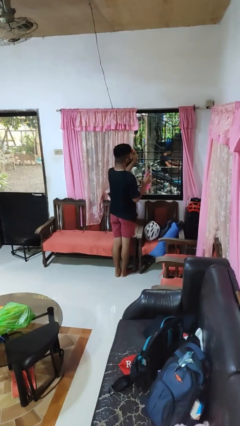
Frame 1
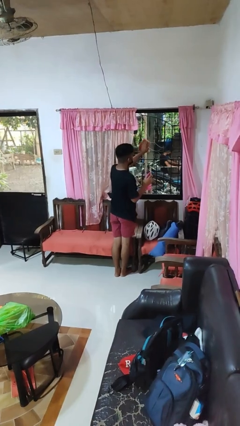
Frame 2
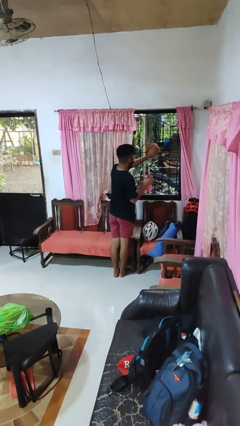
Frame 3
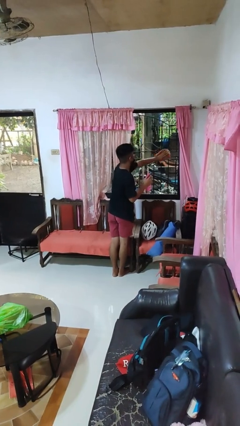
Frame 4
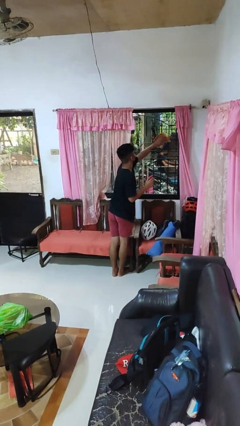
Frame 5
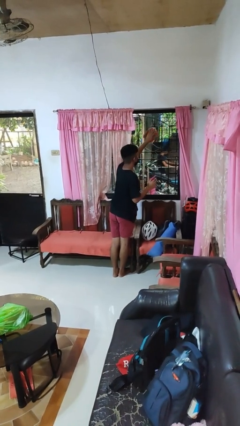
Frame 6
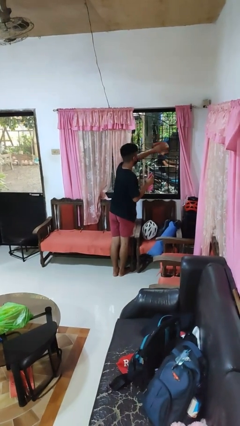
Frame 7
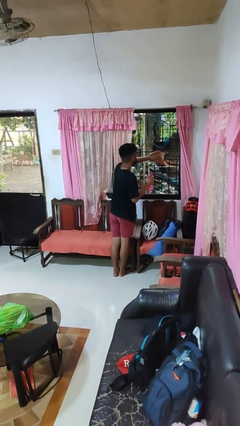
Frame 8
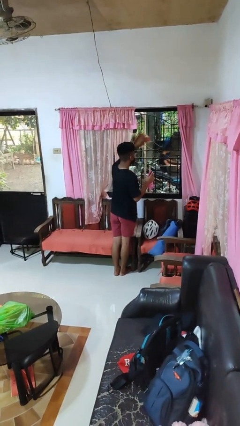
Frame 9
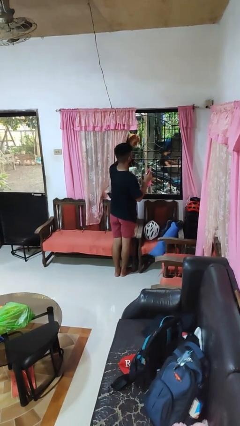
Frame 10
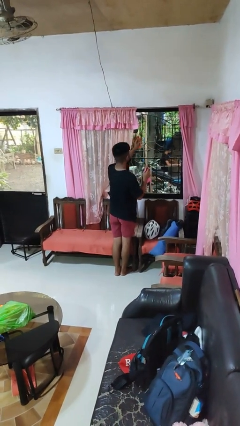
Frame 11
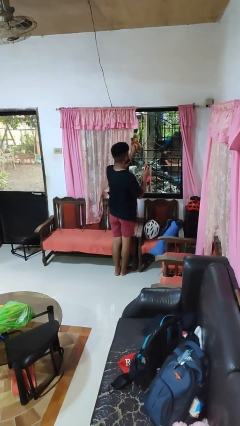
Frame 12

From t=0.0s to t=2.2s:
person washes window

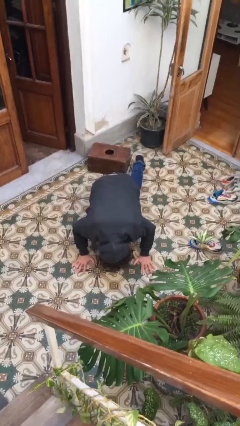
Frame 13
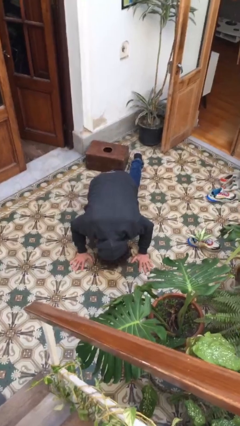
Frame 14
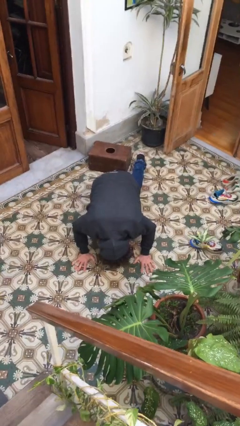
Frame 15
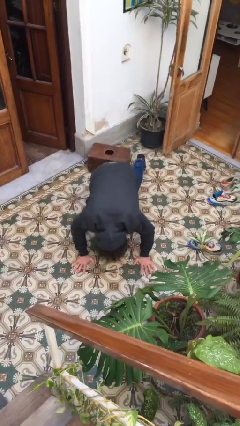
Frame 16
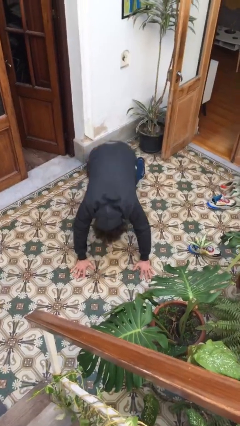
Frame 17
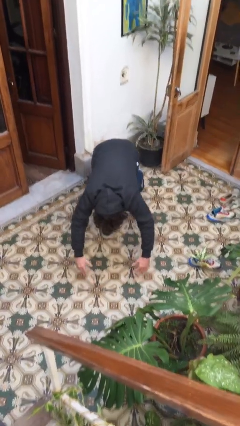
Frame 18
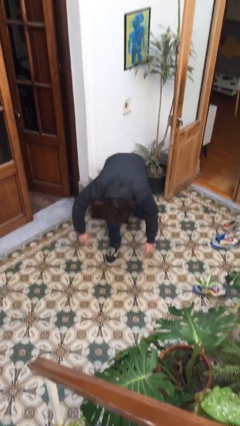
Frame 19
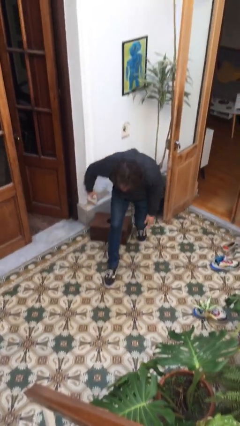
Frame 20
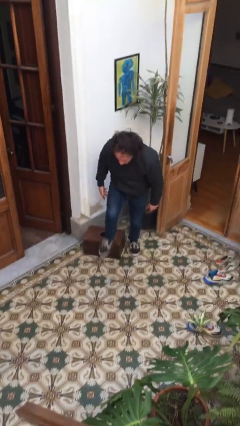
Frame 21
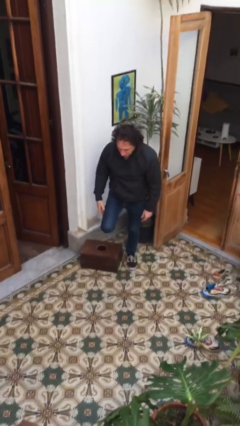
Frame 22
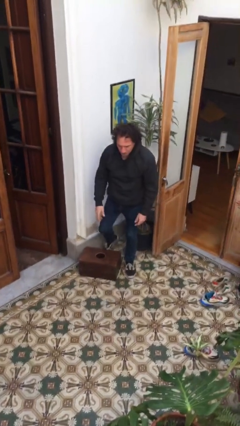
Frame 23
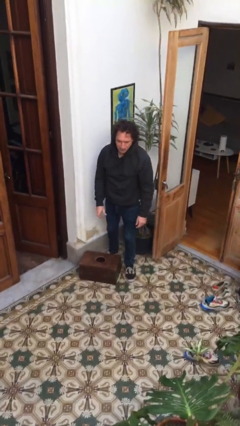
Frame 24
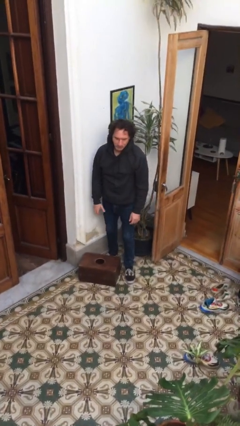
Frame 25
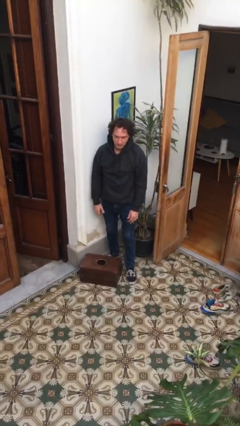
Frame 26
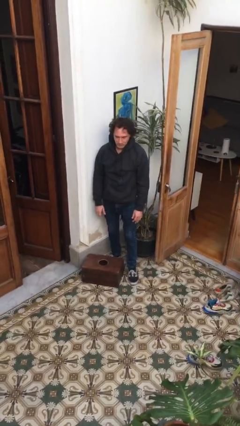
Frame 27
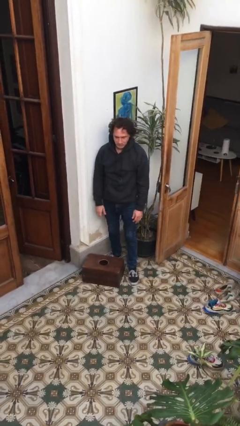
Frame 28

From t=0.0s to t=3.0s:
person stands up from floor

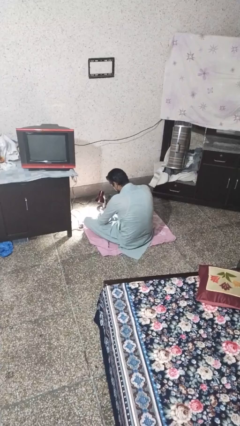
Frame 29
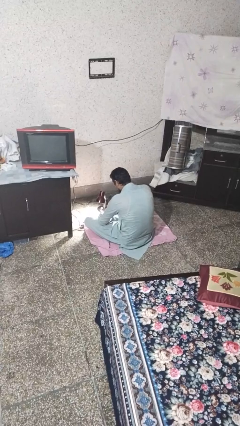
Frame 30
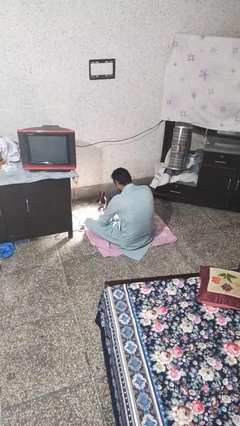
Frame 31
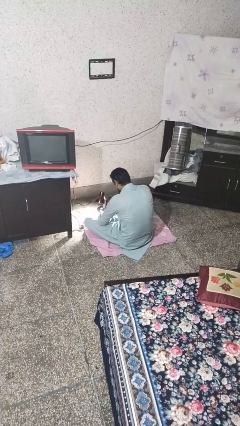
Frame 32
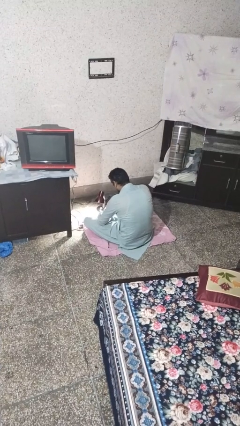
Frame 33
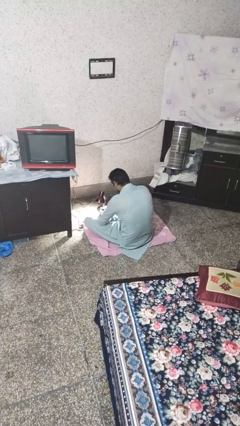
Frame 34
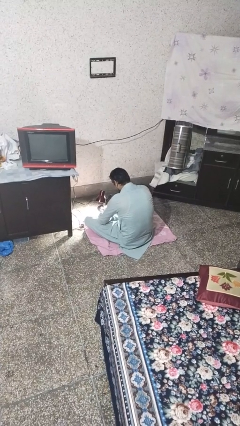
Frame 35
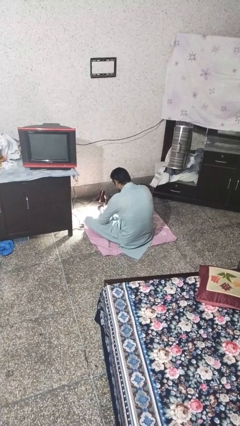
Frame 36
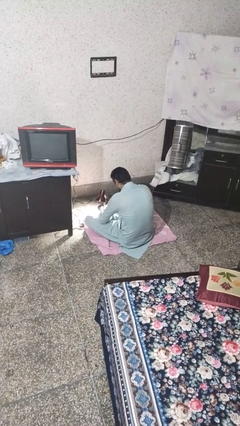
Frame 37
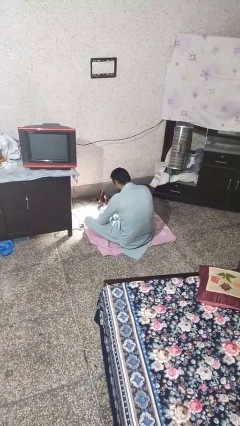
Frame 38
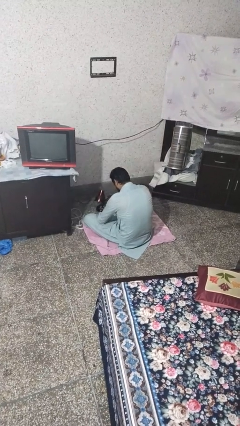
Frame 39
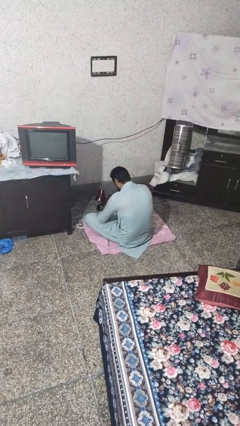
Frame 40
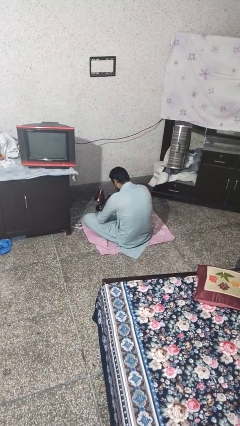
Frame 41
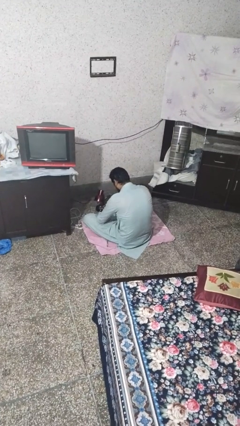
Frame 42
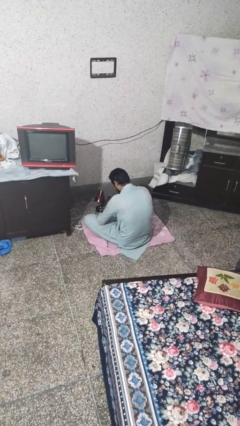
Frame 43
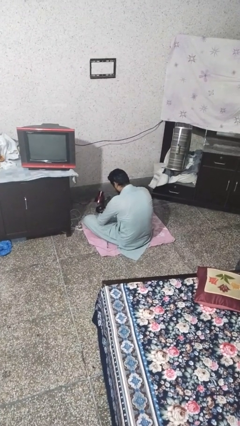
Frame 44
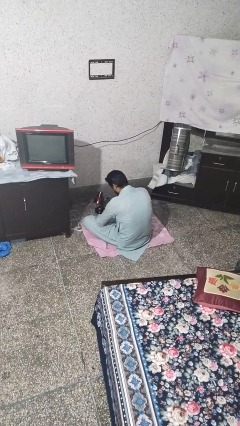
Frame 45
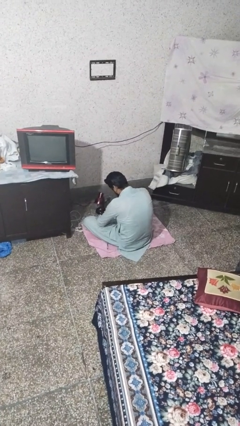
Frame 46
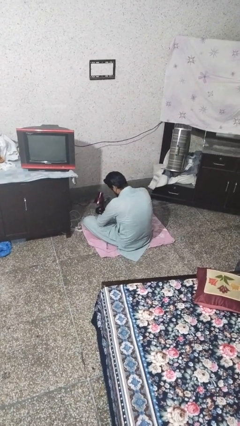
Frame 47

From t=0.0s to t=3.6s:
person turns off lamp

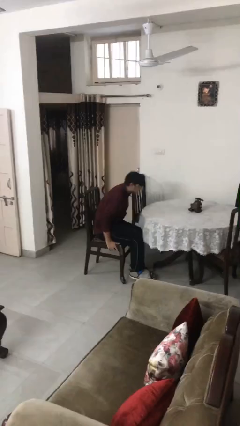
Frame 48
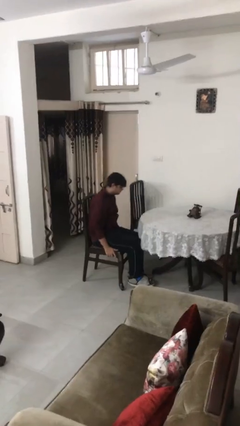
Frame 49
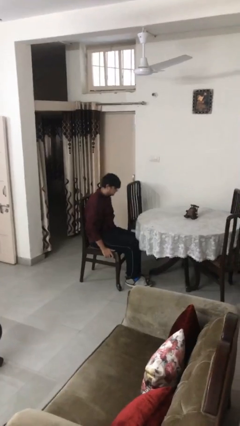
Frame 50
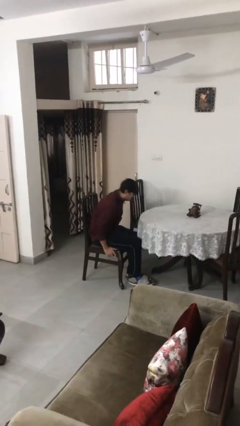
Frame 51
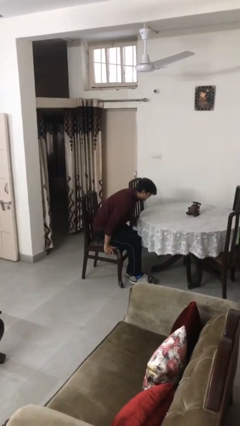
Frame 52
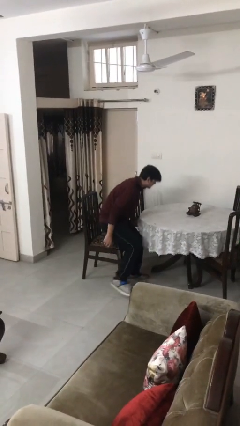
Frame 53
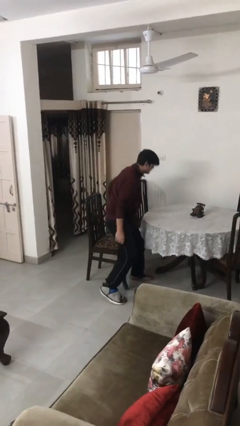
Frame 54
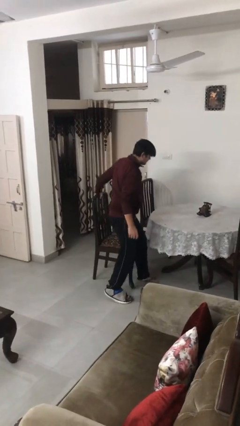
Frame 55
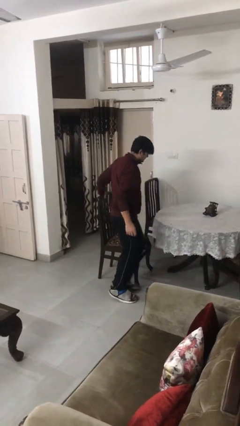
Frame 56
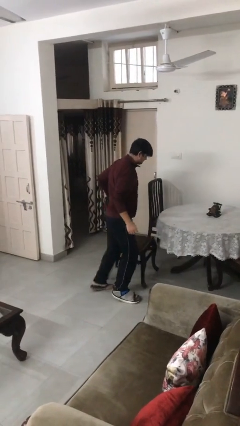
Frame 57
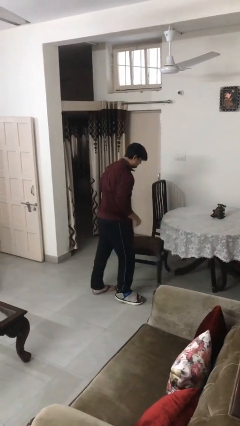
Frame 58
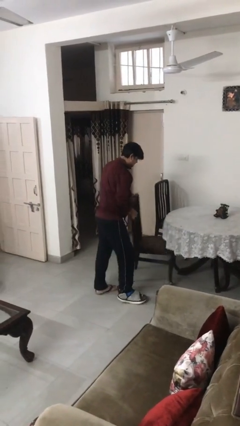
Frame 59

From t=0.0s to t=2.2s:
person stands up

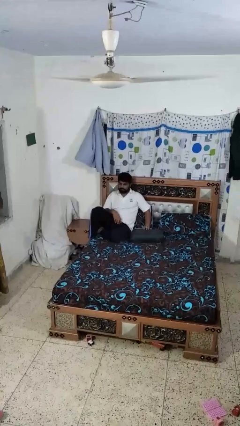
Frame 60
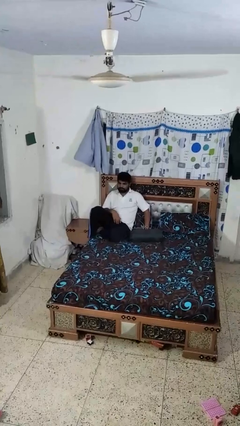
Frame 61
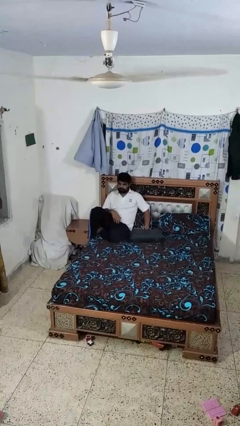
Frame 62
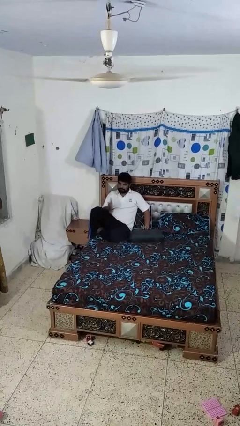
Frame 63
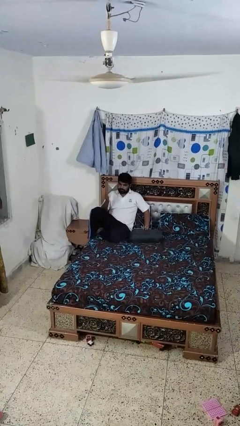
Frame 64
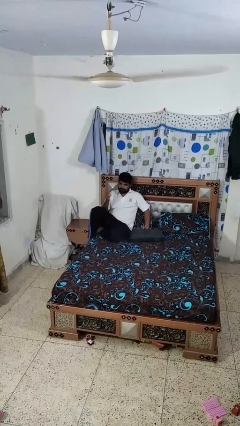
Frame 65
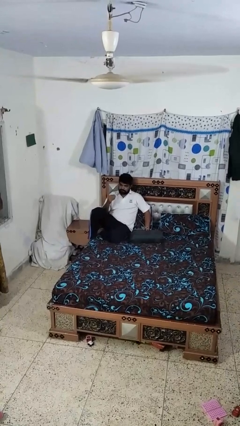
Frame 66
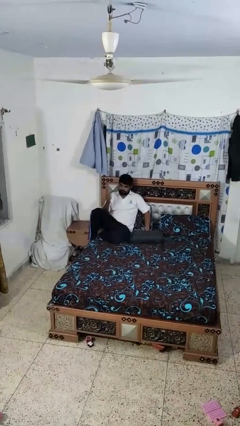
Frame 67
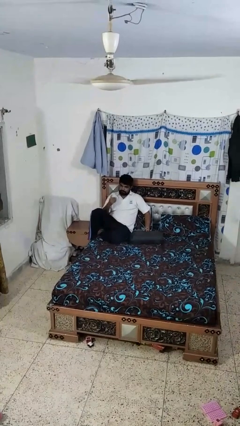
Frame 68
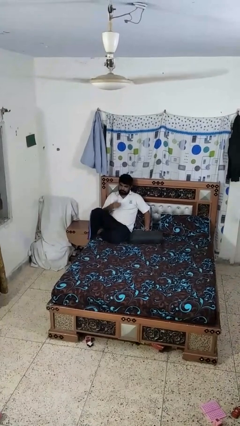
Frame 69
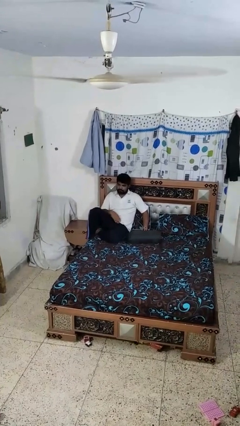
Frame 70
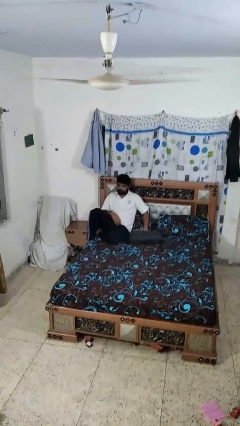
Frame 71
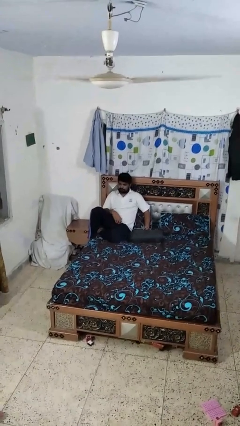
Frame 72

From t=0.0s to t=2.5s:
person gestures come here

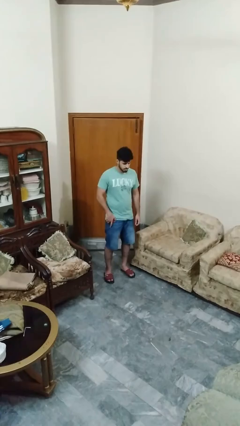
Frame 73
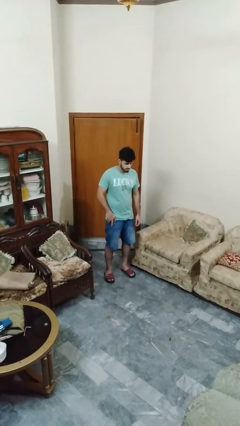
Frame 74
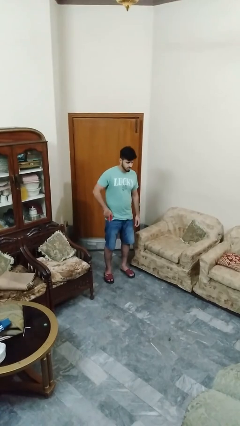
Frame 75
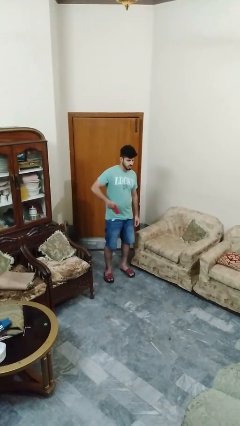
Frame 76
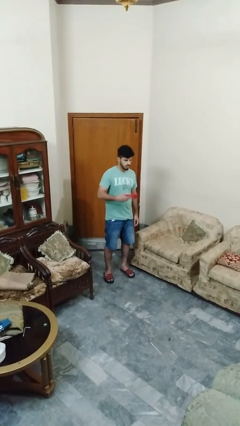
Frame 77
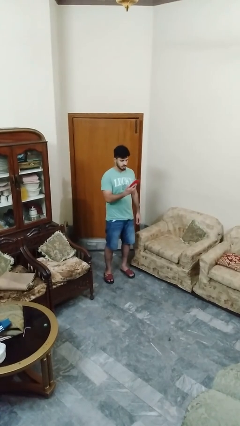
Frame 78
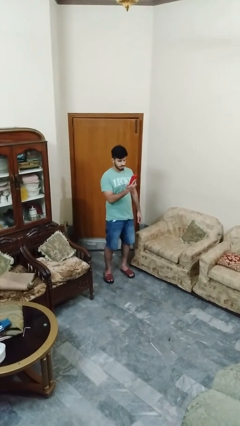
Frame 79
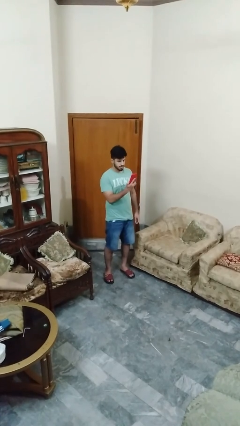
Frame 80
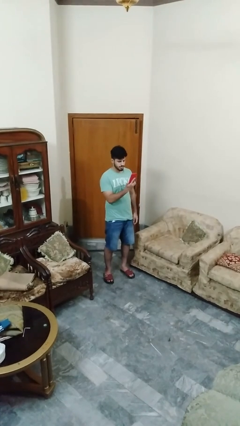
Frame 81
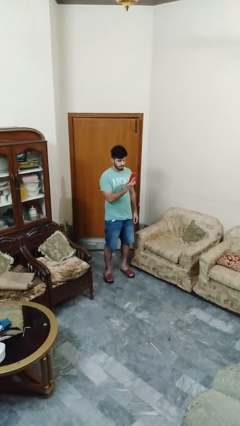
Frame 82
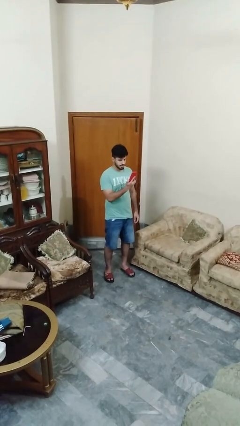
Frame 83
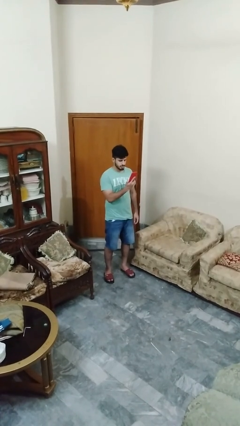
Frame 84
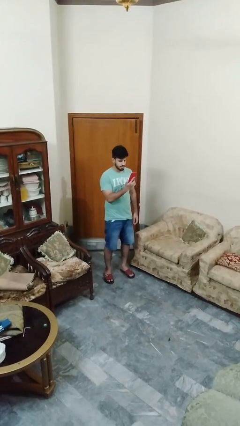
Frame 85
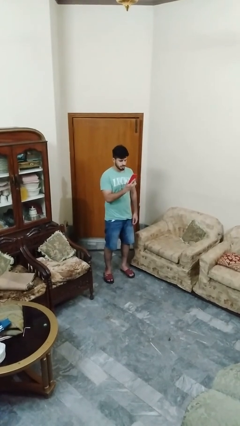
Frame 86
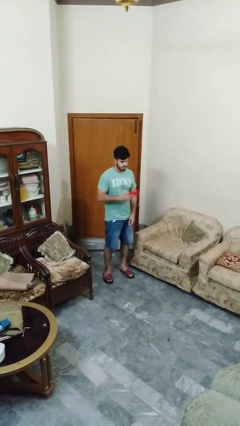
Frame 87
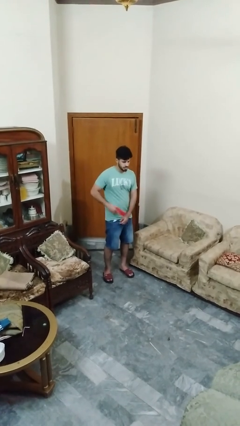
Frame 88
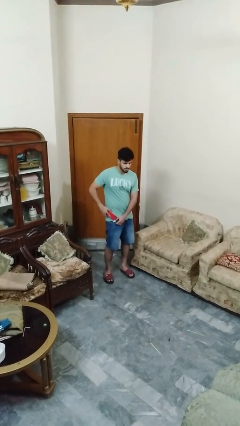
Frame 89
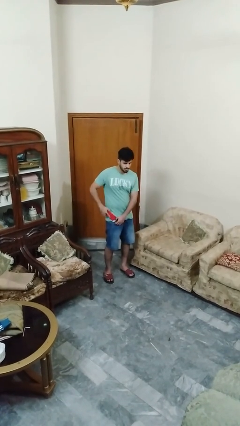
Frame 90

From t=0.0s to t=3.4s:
person takes phone from pocket

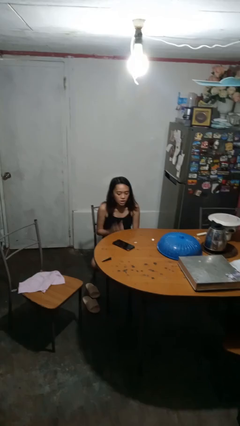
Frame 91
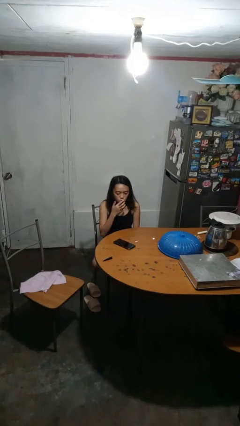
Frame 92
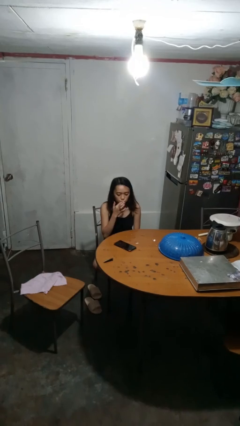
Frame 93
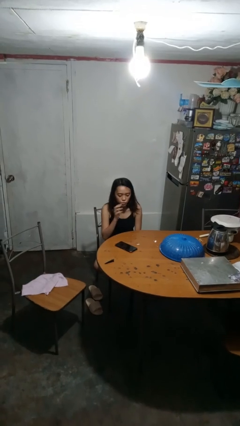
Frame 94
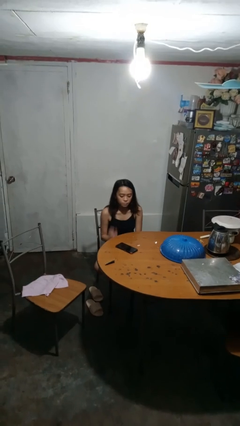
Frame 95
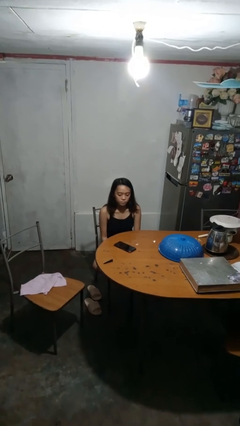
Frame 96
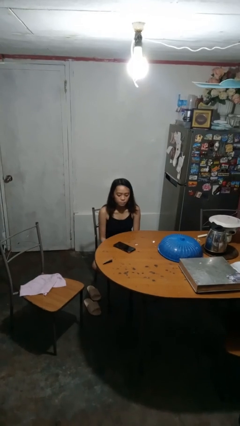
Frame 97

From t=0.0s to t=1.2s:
person licks fingers
